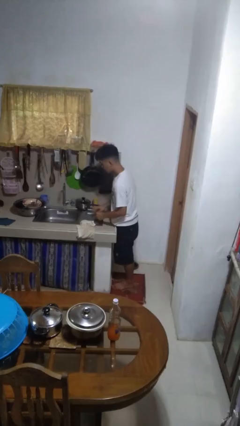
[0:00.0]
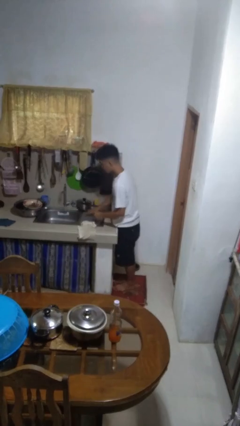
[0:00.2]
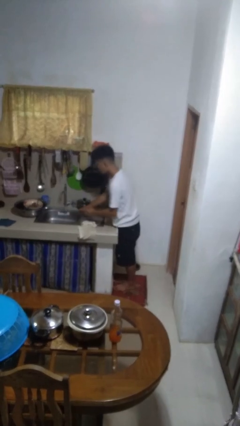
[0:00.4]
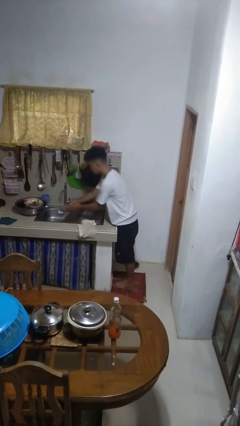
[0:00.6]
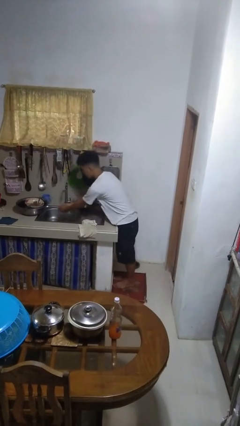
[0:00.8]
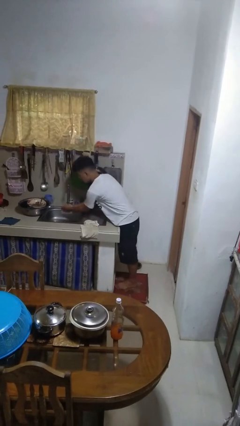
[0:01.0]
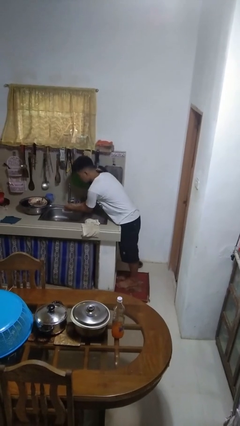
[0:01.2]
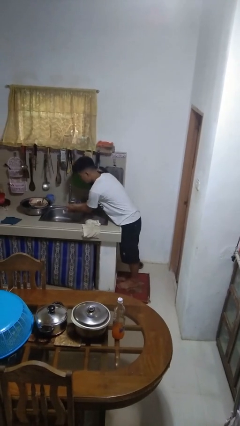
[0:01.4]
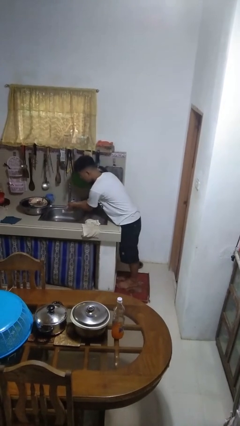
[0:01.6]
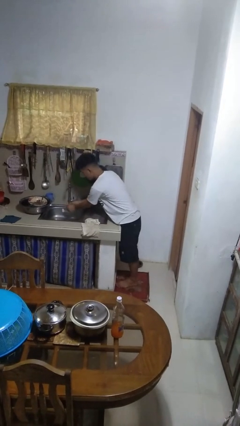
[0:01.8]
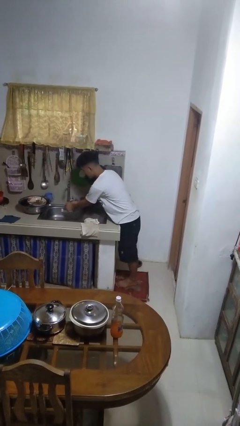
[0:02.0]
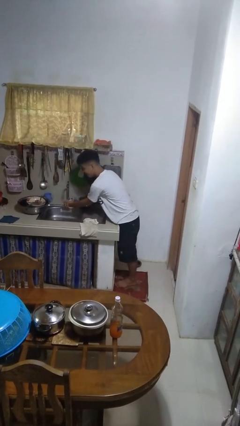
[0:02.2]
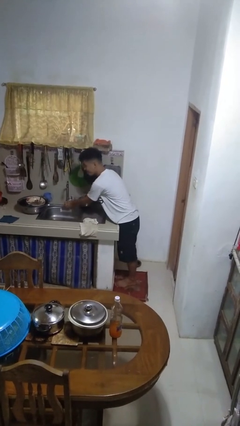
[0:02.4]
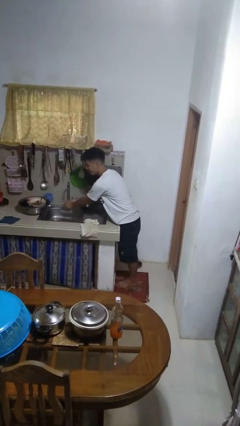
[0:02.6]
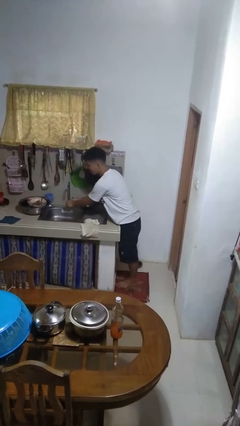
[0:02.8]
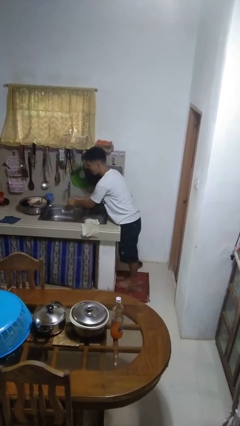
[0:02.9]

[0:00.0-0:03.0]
person washes hands

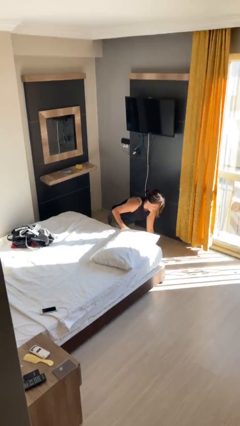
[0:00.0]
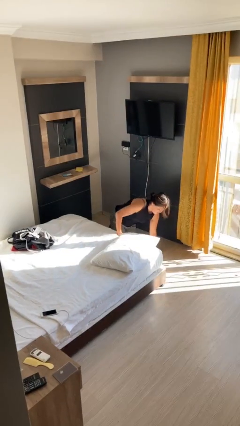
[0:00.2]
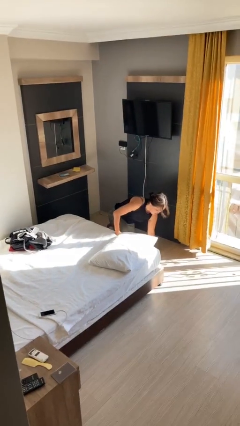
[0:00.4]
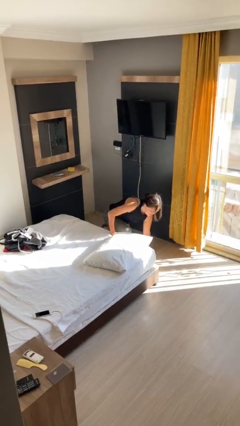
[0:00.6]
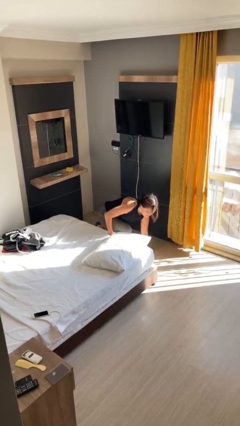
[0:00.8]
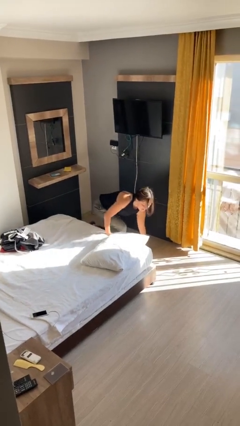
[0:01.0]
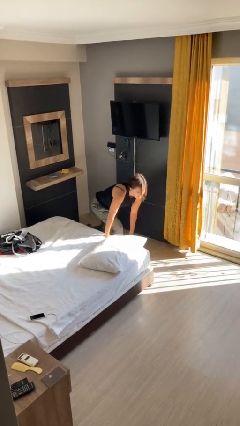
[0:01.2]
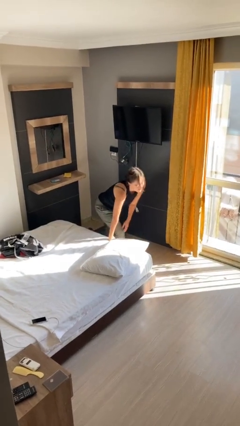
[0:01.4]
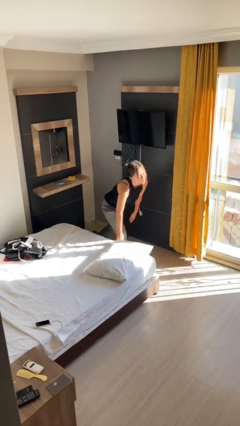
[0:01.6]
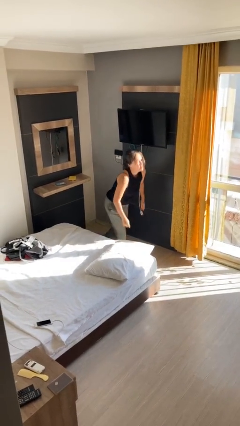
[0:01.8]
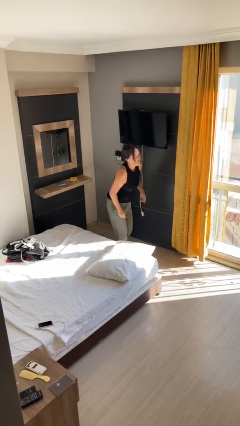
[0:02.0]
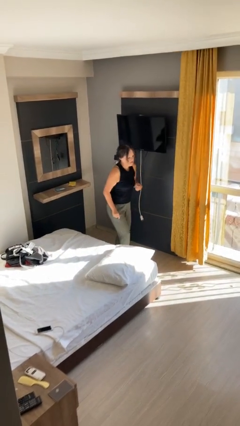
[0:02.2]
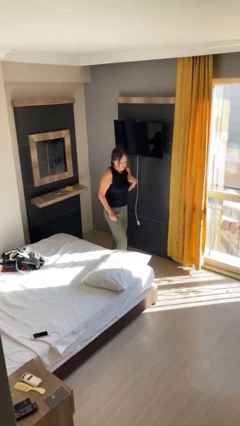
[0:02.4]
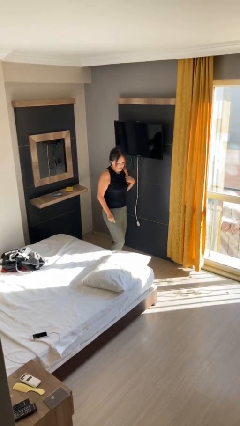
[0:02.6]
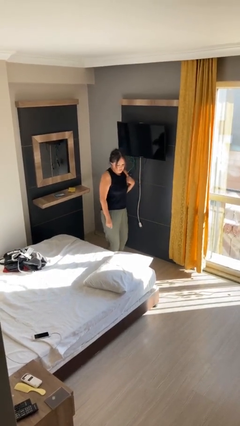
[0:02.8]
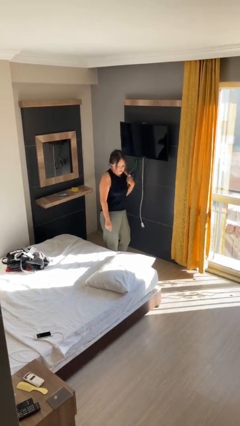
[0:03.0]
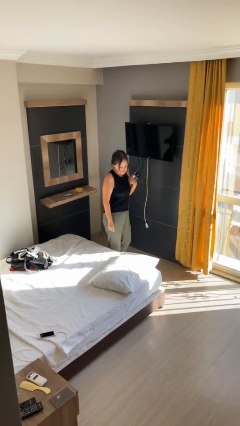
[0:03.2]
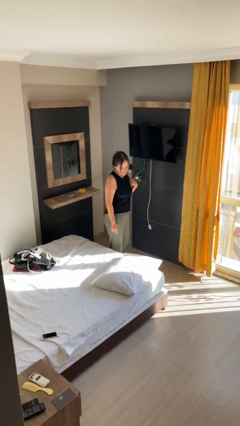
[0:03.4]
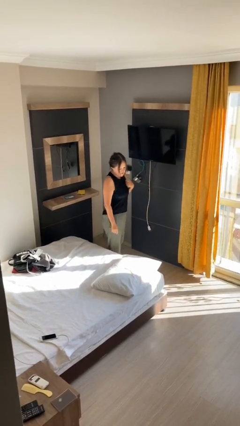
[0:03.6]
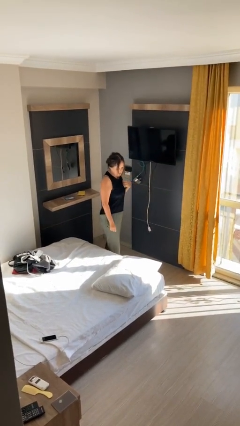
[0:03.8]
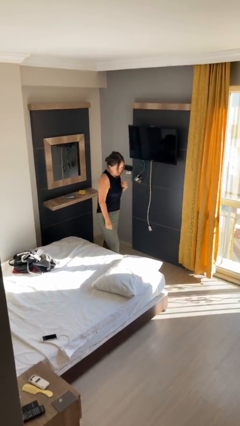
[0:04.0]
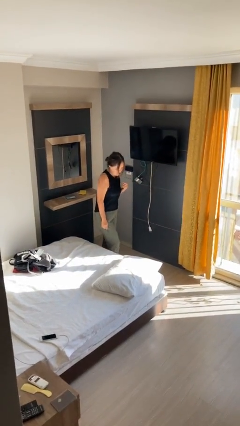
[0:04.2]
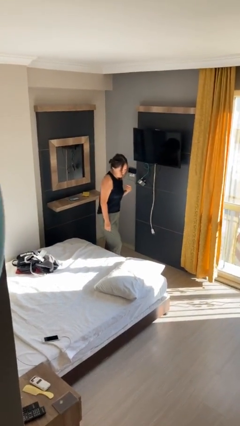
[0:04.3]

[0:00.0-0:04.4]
person stands up from floor

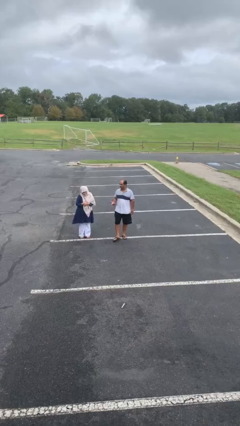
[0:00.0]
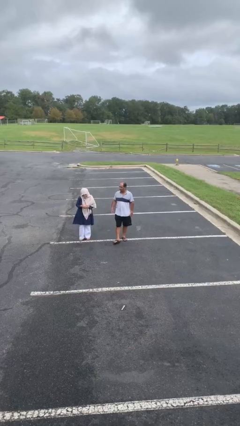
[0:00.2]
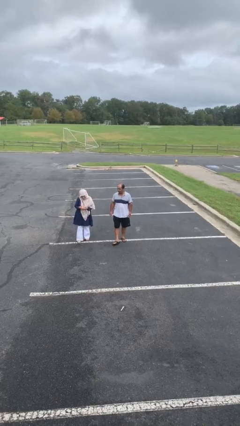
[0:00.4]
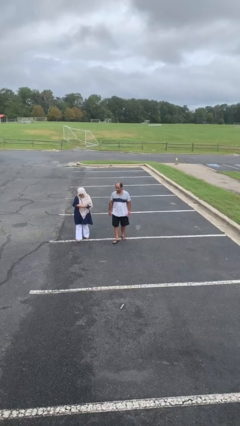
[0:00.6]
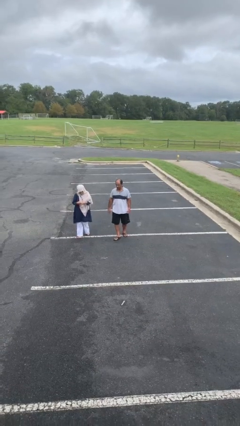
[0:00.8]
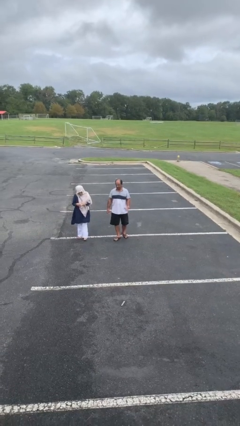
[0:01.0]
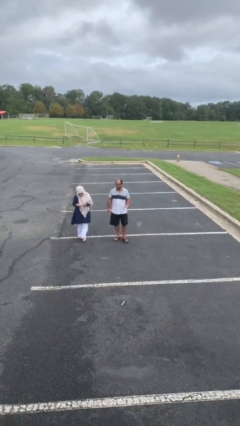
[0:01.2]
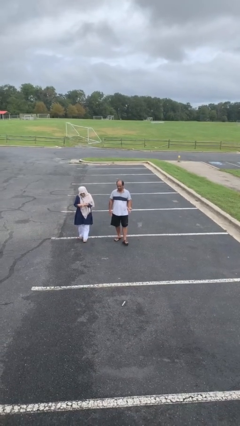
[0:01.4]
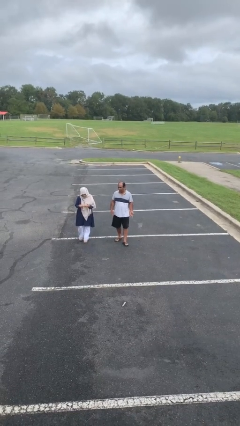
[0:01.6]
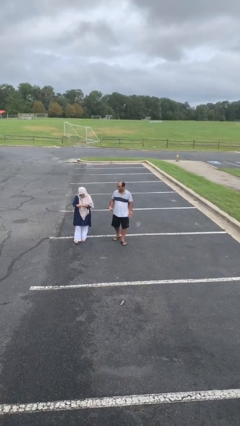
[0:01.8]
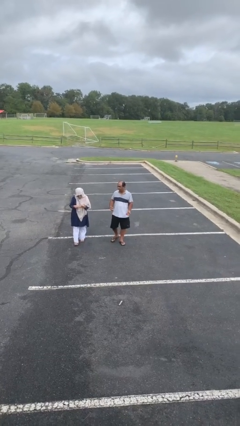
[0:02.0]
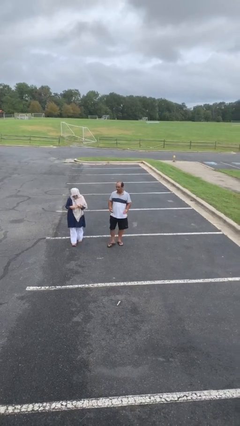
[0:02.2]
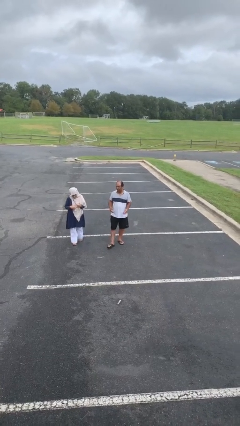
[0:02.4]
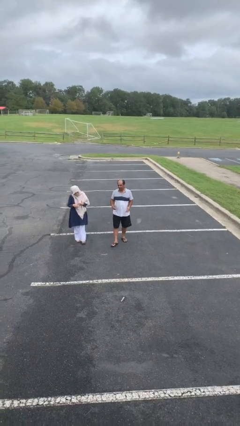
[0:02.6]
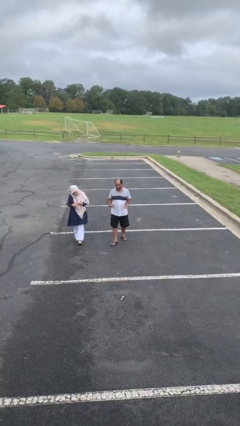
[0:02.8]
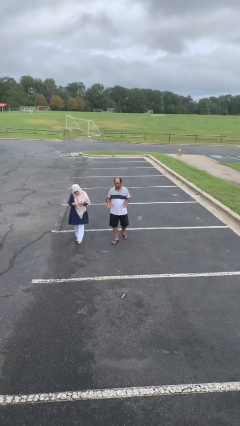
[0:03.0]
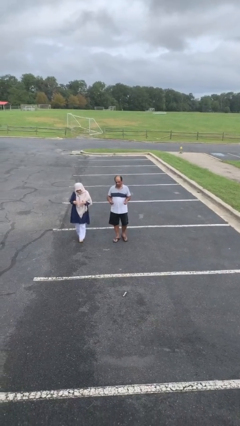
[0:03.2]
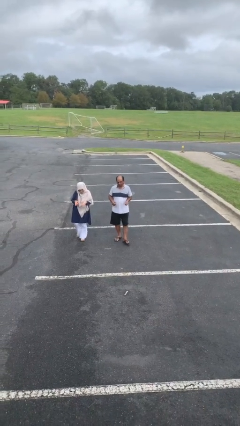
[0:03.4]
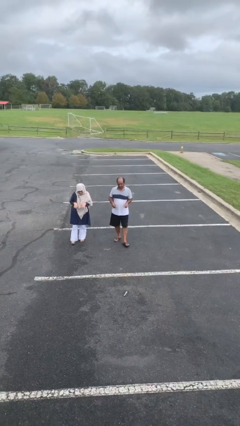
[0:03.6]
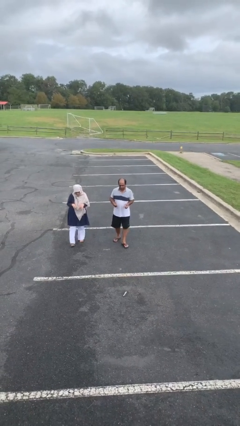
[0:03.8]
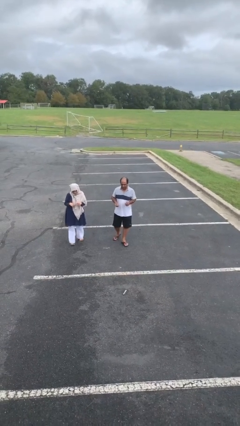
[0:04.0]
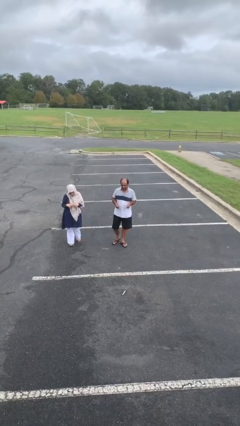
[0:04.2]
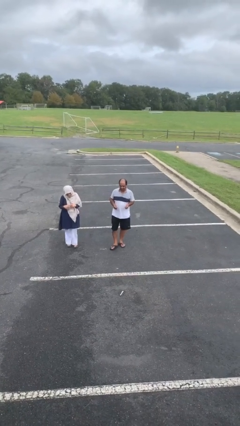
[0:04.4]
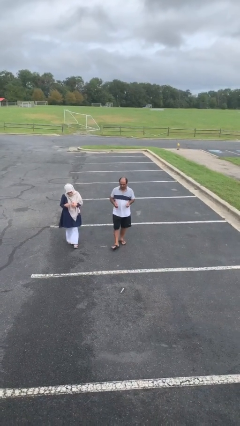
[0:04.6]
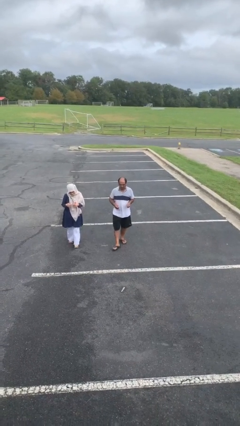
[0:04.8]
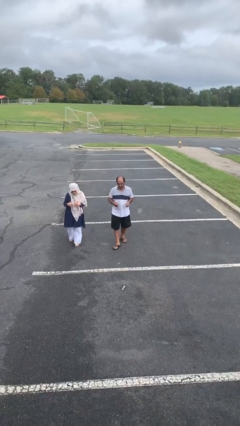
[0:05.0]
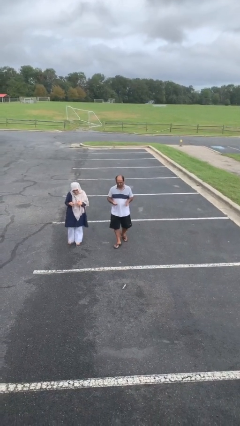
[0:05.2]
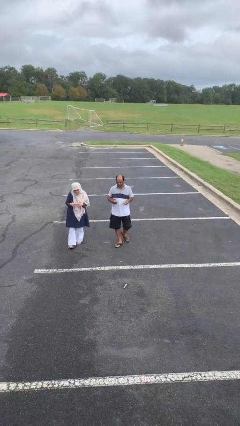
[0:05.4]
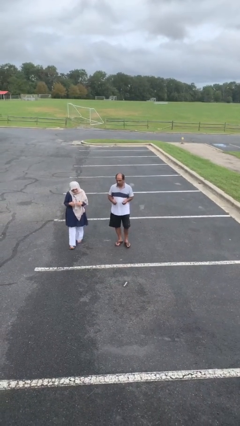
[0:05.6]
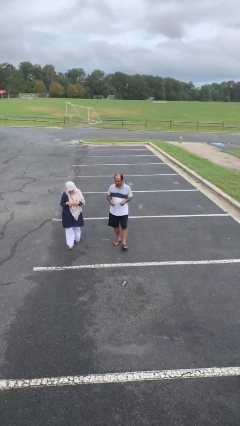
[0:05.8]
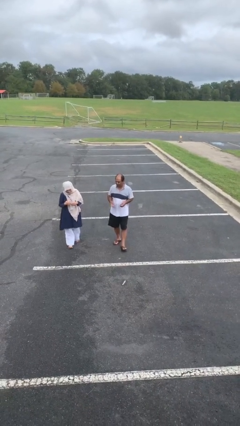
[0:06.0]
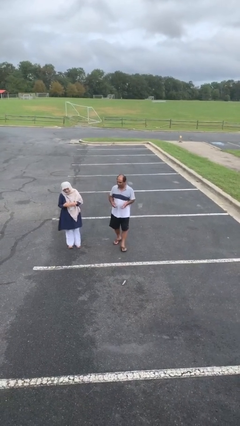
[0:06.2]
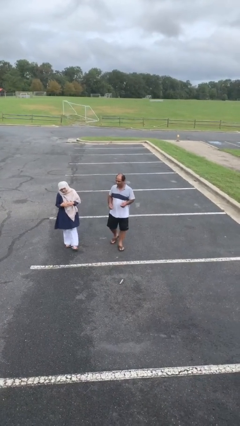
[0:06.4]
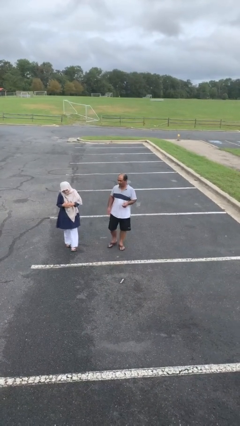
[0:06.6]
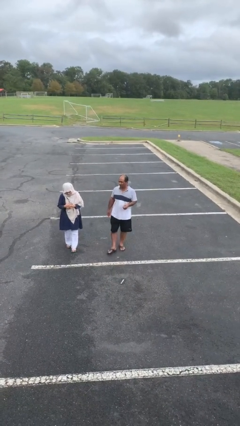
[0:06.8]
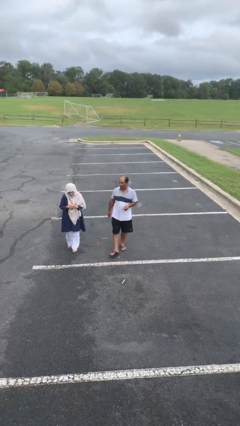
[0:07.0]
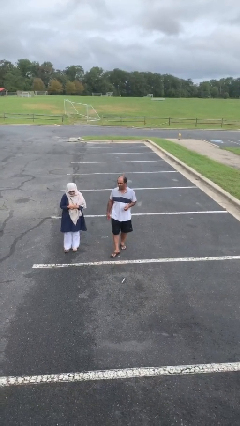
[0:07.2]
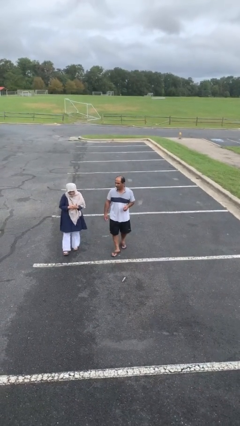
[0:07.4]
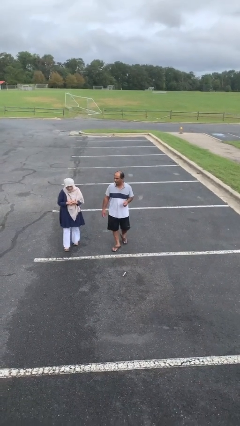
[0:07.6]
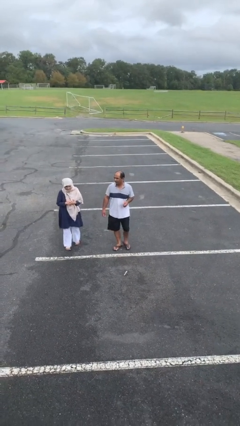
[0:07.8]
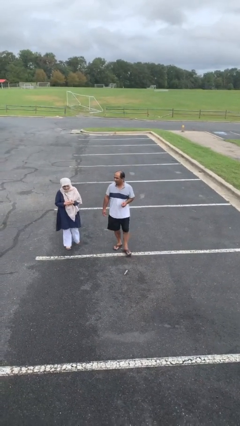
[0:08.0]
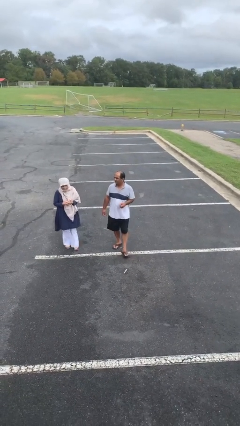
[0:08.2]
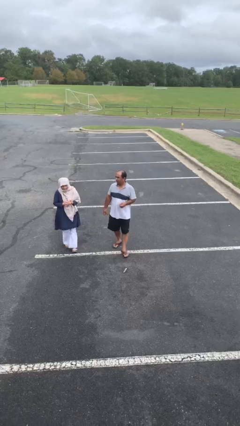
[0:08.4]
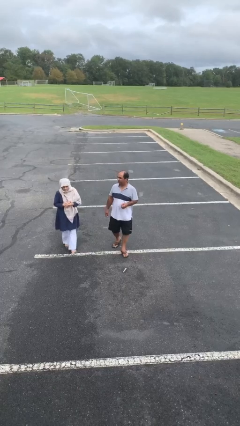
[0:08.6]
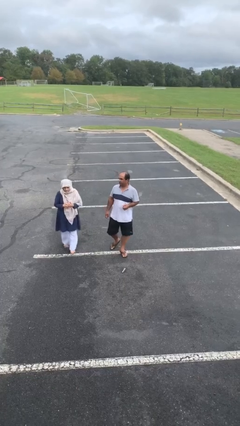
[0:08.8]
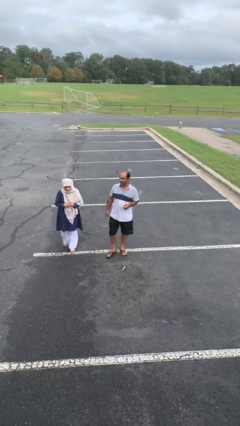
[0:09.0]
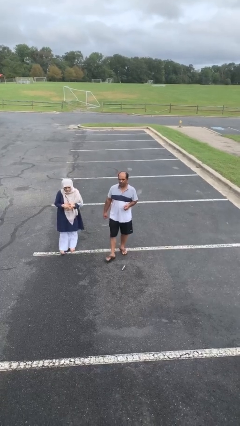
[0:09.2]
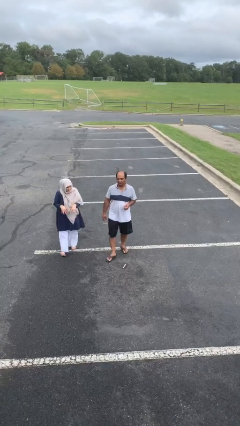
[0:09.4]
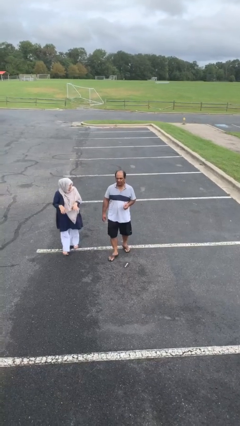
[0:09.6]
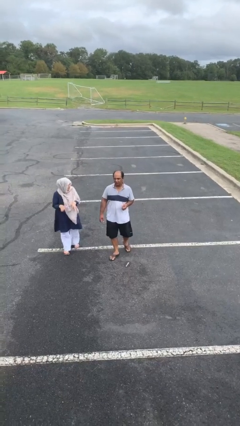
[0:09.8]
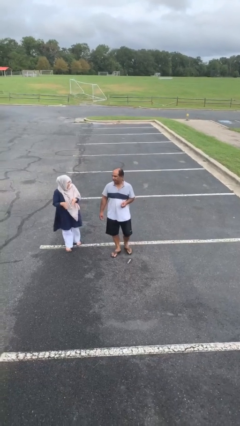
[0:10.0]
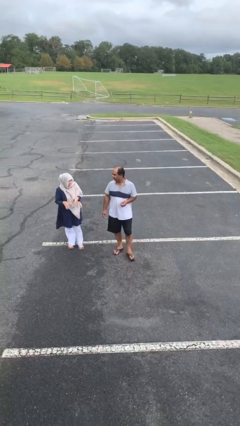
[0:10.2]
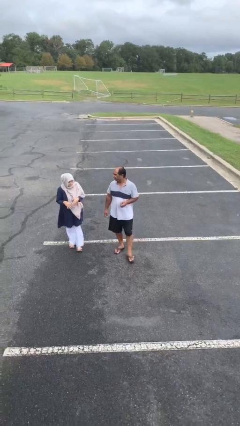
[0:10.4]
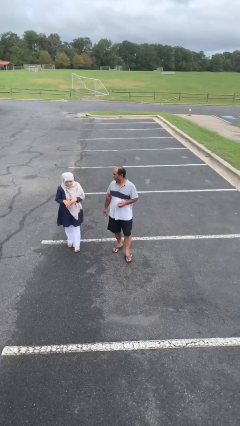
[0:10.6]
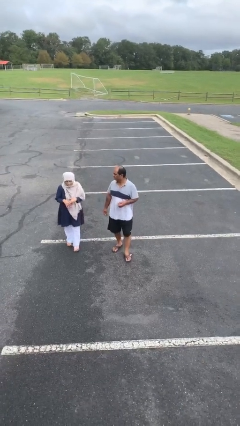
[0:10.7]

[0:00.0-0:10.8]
person talks to person
